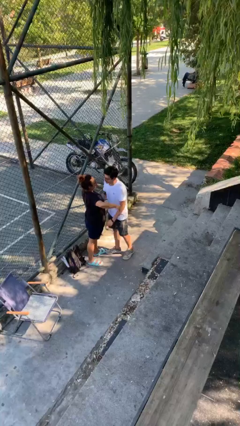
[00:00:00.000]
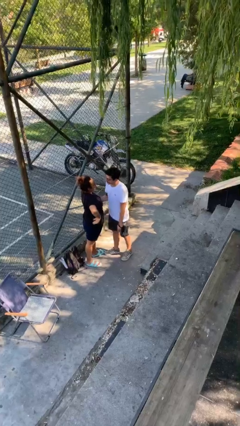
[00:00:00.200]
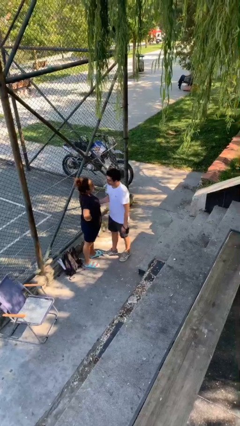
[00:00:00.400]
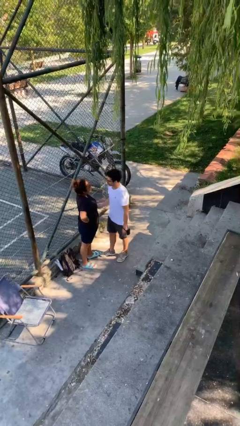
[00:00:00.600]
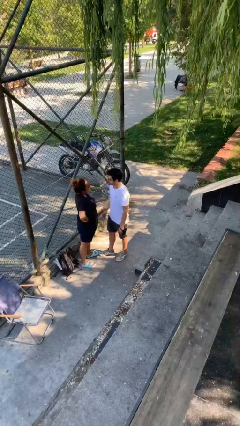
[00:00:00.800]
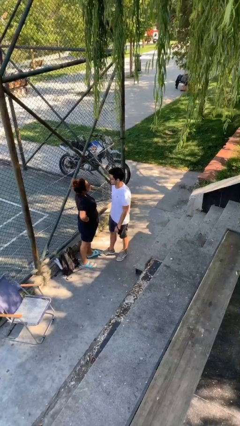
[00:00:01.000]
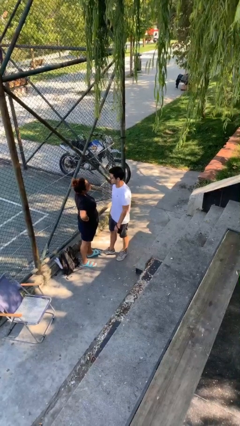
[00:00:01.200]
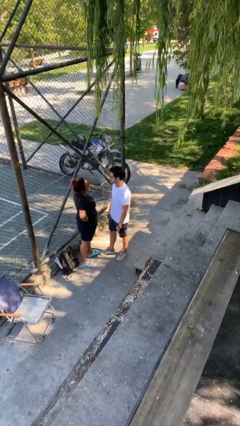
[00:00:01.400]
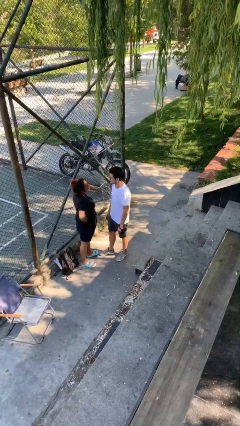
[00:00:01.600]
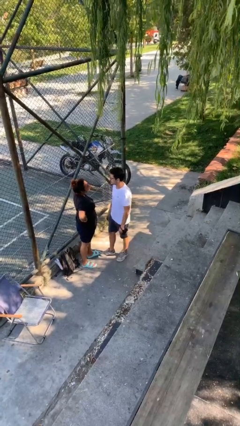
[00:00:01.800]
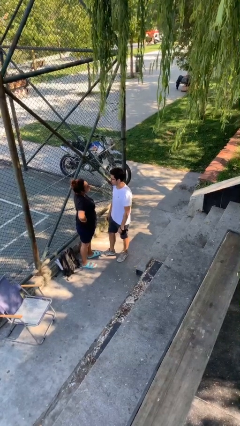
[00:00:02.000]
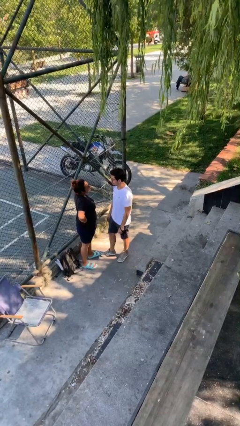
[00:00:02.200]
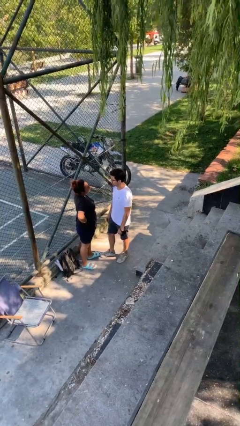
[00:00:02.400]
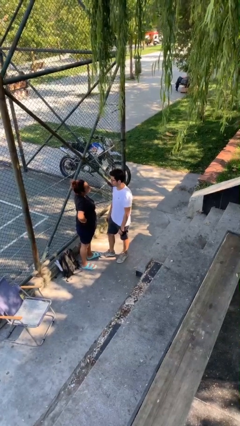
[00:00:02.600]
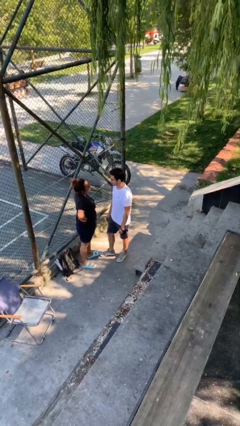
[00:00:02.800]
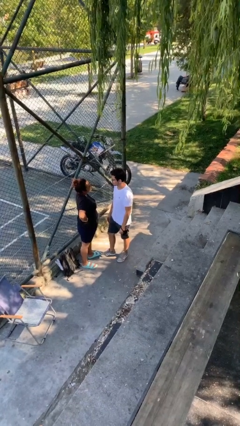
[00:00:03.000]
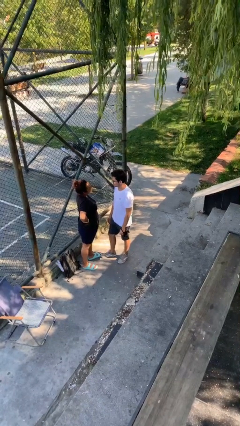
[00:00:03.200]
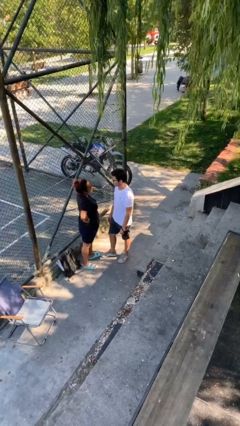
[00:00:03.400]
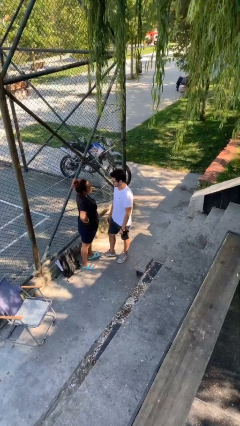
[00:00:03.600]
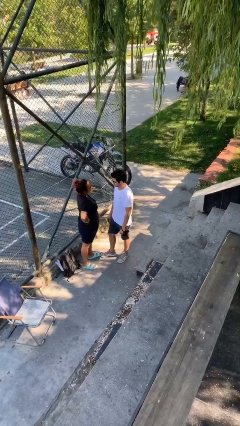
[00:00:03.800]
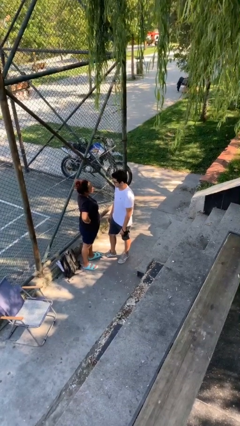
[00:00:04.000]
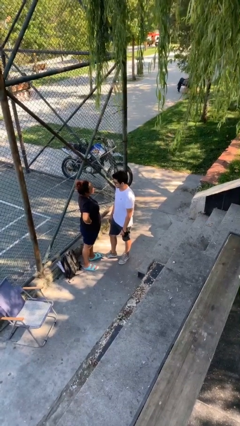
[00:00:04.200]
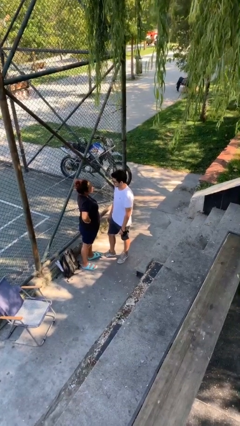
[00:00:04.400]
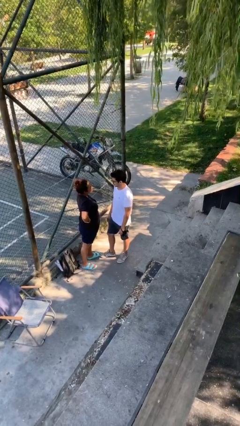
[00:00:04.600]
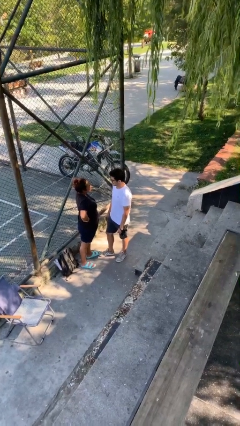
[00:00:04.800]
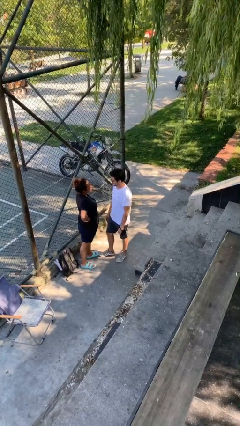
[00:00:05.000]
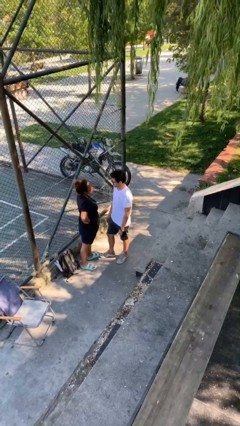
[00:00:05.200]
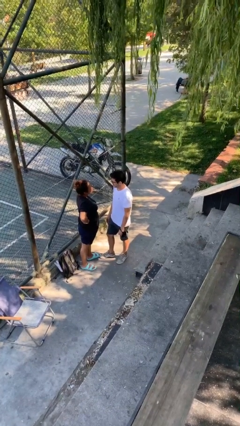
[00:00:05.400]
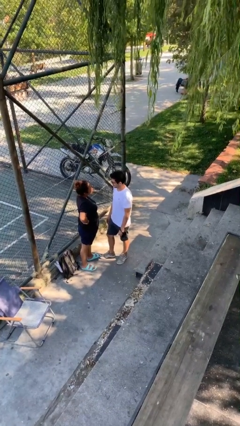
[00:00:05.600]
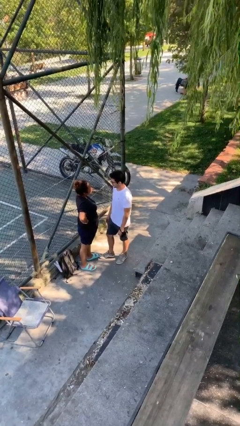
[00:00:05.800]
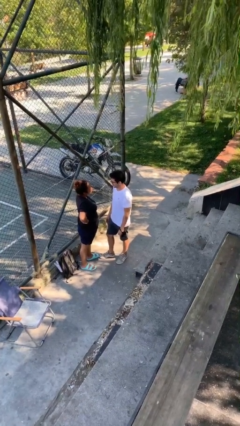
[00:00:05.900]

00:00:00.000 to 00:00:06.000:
person talks to person

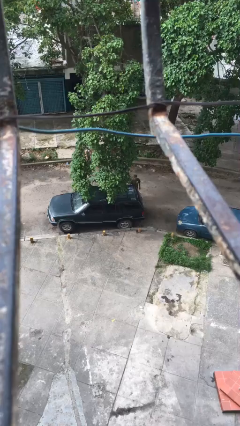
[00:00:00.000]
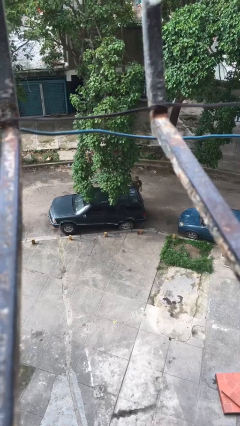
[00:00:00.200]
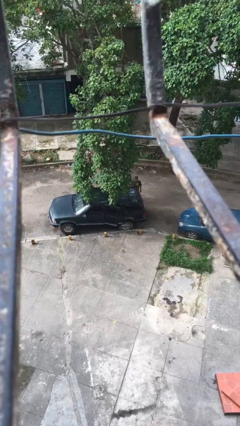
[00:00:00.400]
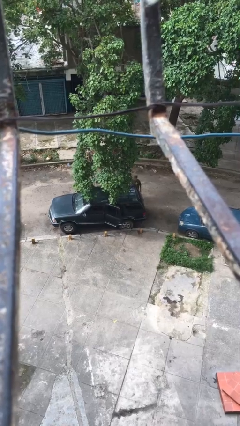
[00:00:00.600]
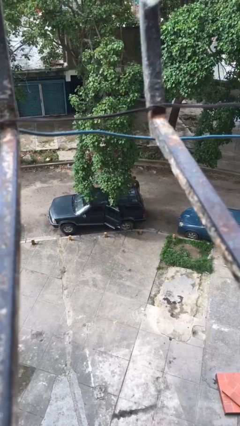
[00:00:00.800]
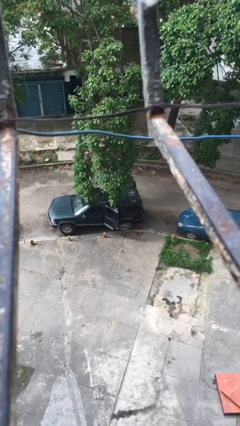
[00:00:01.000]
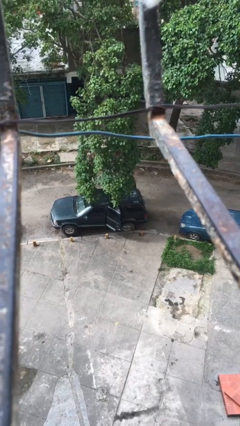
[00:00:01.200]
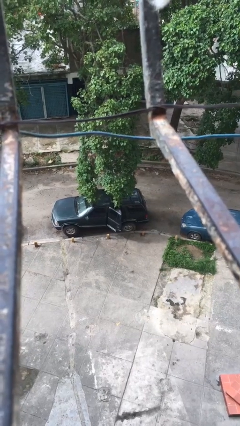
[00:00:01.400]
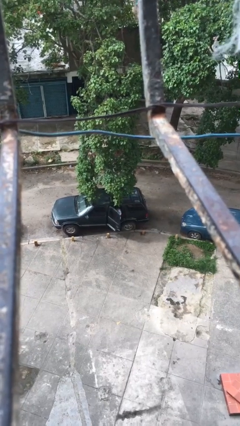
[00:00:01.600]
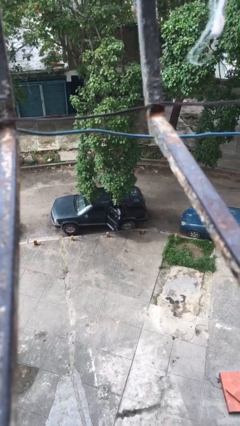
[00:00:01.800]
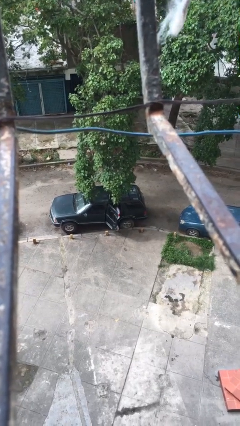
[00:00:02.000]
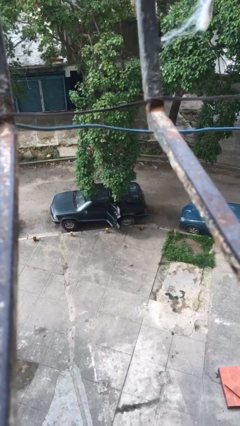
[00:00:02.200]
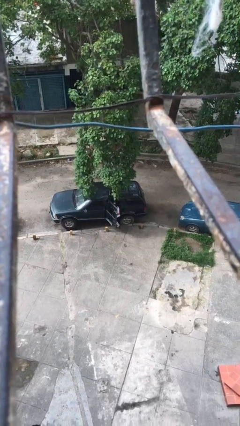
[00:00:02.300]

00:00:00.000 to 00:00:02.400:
person opens car door

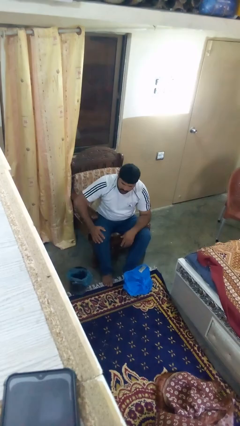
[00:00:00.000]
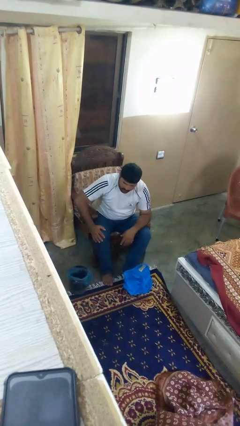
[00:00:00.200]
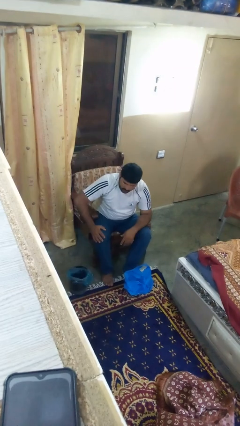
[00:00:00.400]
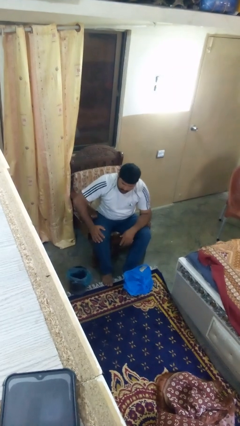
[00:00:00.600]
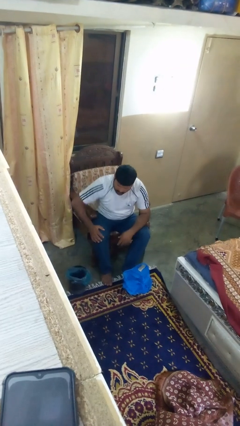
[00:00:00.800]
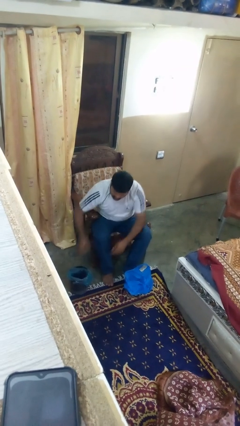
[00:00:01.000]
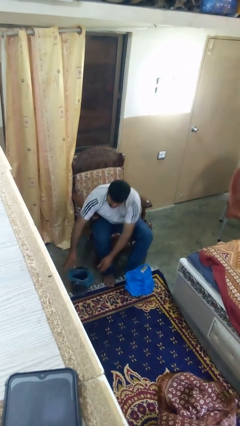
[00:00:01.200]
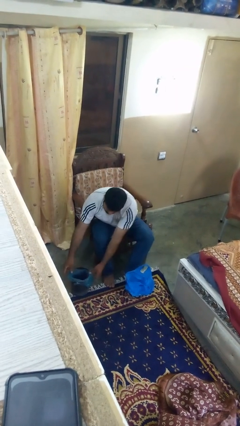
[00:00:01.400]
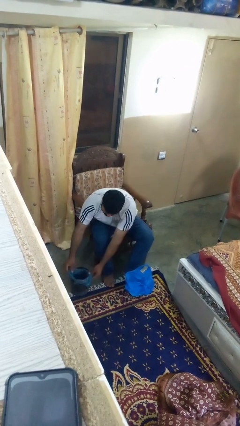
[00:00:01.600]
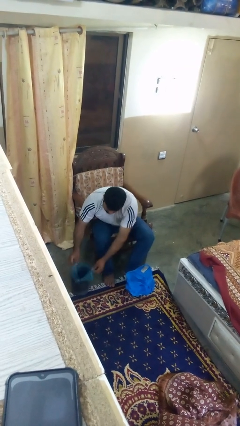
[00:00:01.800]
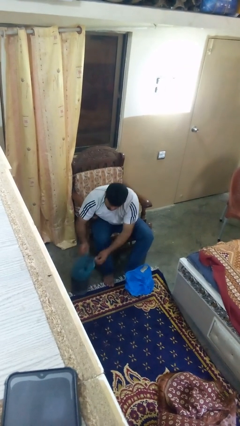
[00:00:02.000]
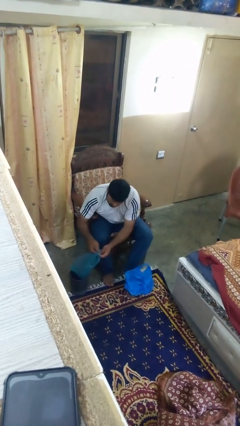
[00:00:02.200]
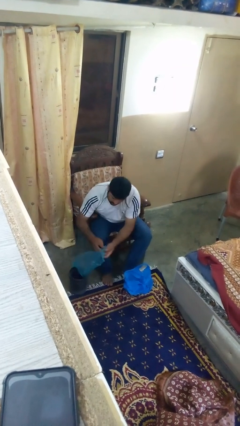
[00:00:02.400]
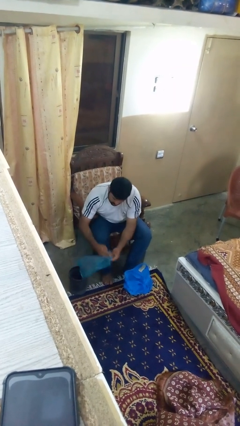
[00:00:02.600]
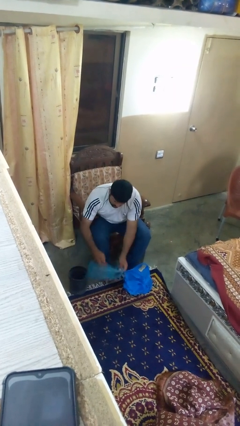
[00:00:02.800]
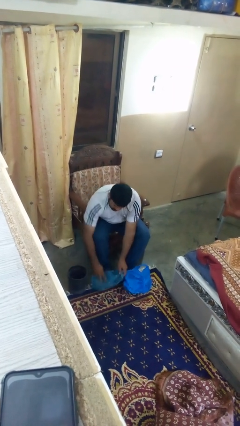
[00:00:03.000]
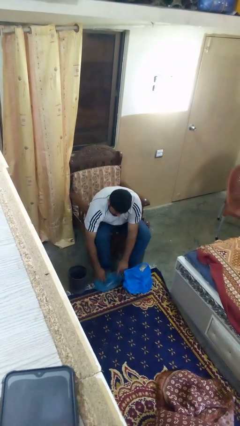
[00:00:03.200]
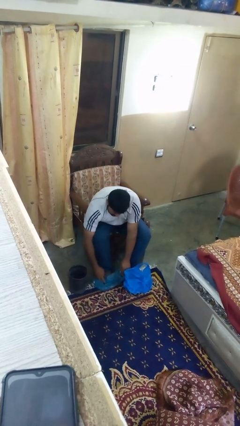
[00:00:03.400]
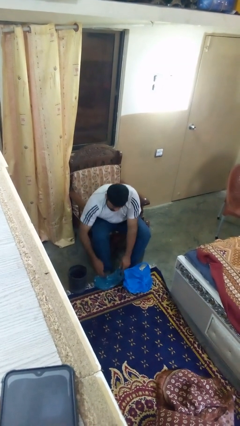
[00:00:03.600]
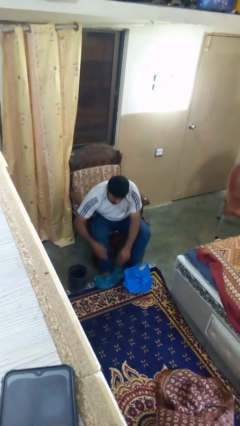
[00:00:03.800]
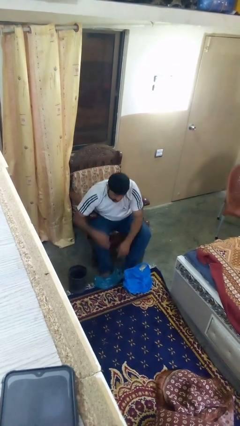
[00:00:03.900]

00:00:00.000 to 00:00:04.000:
person removes trashbag from trashcan

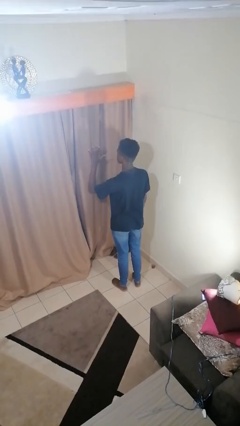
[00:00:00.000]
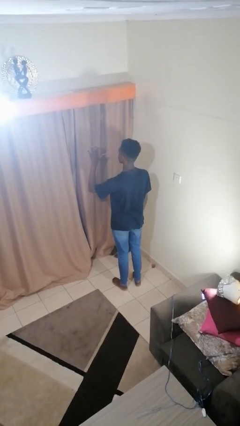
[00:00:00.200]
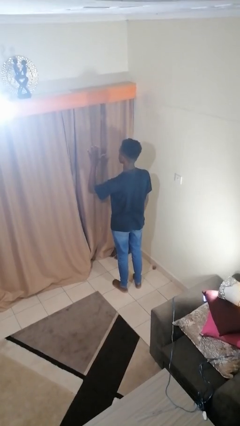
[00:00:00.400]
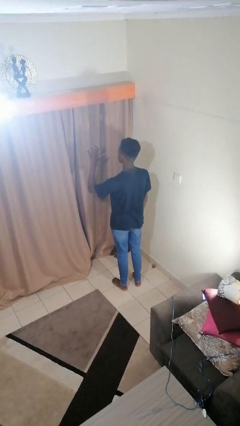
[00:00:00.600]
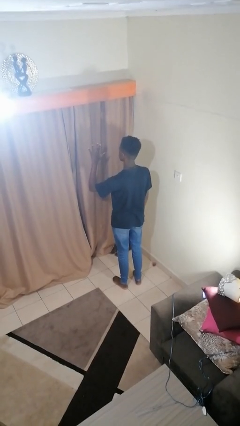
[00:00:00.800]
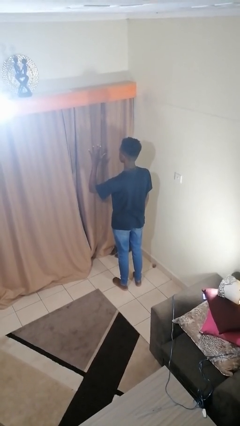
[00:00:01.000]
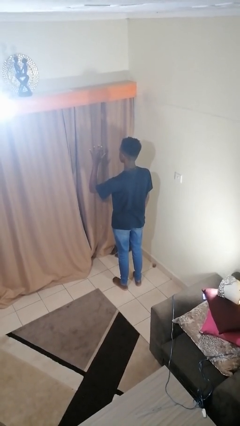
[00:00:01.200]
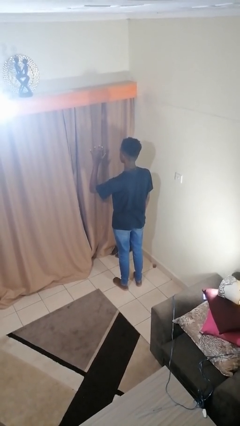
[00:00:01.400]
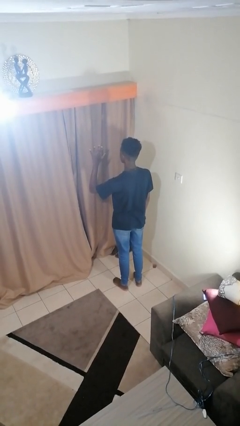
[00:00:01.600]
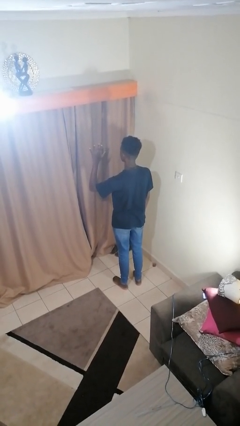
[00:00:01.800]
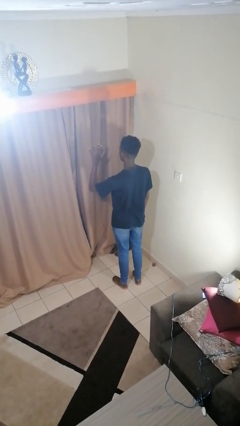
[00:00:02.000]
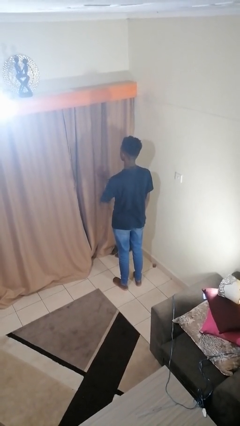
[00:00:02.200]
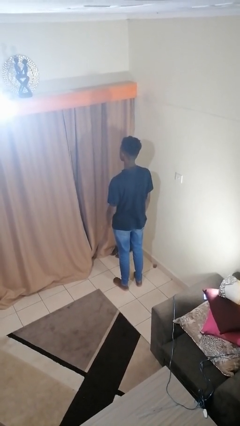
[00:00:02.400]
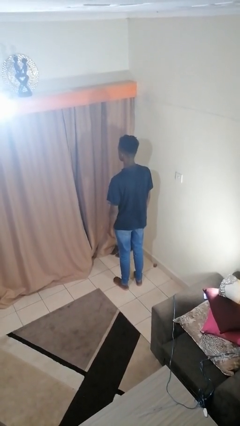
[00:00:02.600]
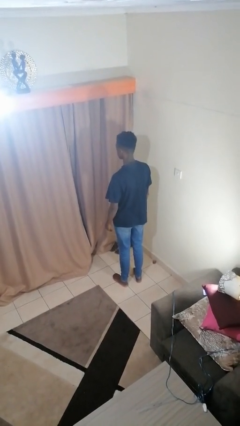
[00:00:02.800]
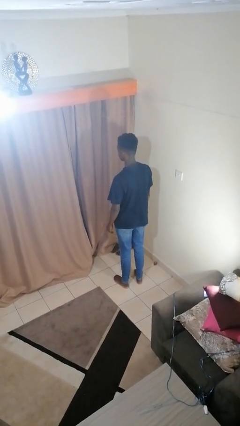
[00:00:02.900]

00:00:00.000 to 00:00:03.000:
person gestures number five

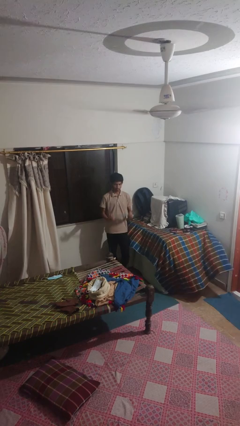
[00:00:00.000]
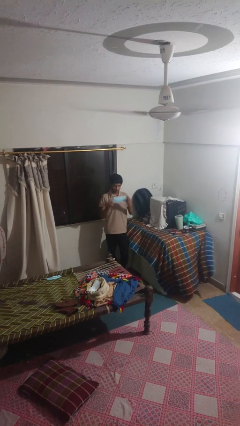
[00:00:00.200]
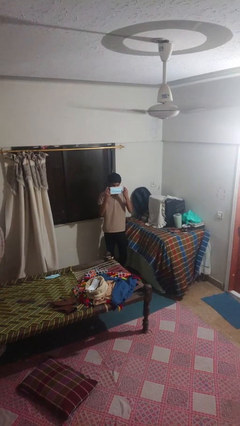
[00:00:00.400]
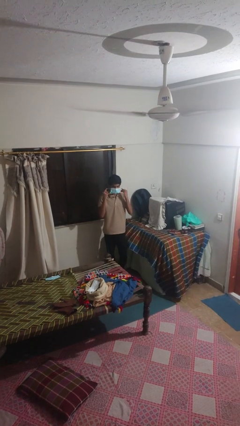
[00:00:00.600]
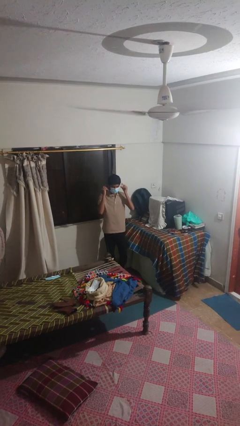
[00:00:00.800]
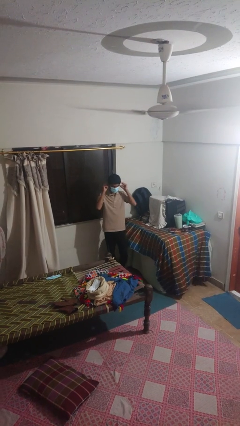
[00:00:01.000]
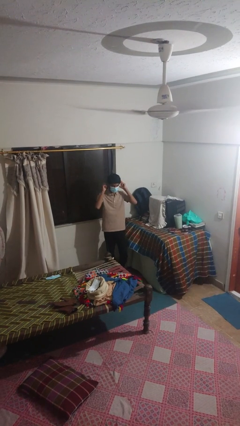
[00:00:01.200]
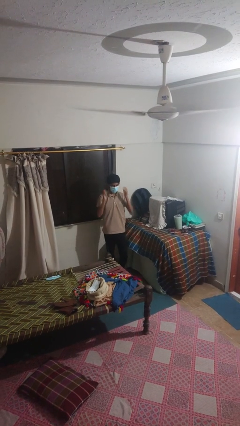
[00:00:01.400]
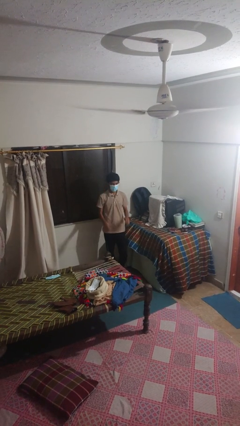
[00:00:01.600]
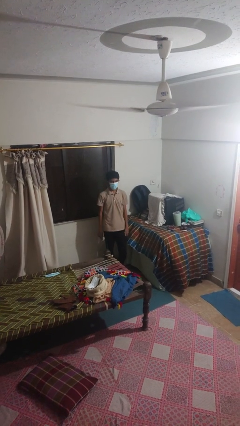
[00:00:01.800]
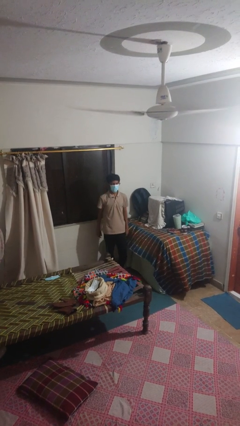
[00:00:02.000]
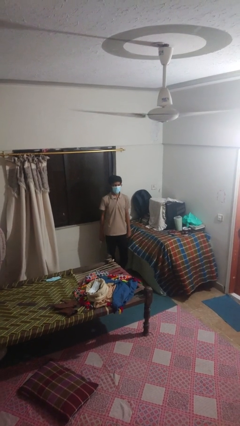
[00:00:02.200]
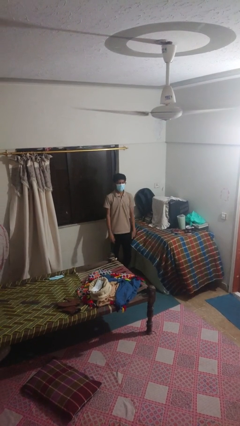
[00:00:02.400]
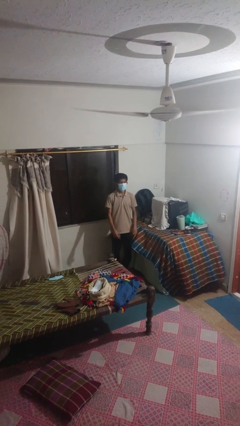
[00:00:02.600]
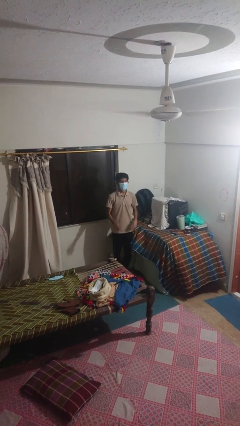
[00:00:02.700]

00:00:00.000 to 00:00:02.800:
person puts on facemask
